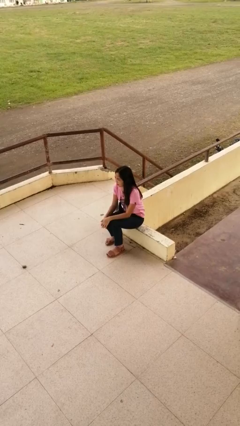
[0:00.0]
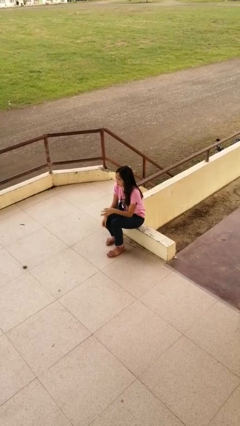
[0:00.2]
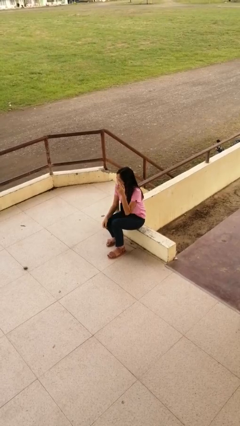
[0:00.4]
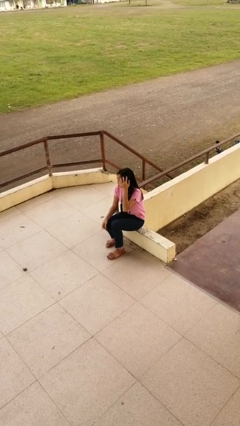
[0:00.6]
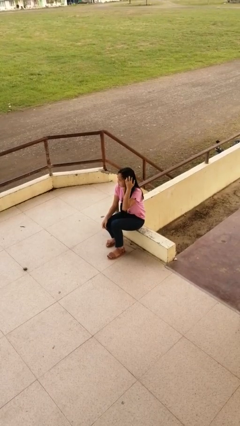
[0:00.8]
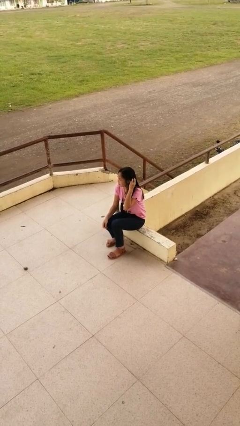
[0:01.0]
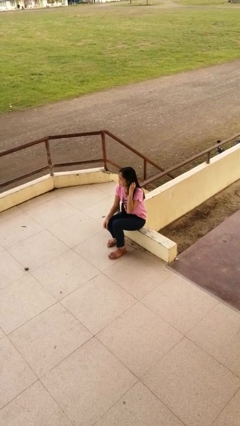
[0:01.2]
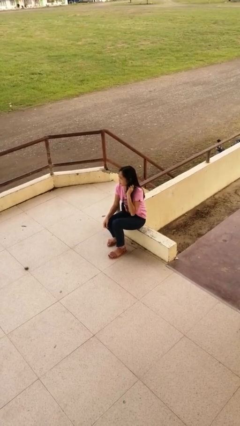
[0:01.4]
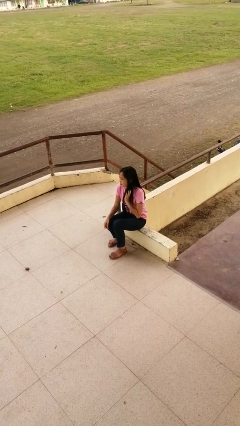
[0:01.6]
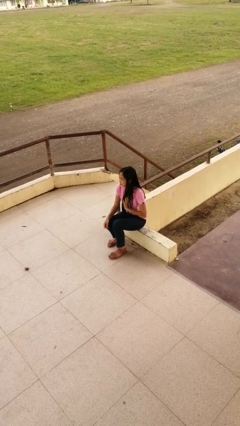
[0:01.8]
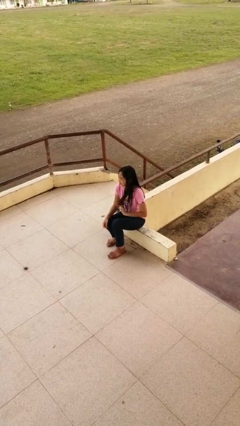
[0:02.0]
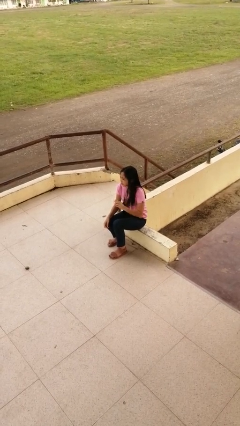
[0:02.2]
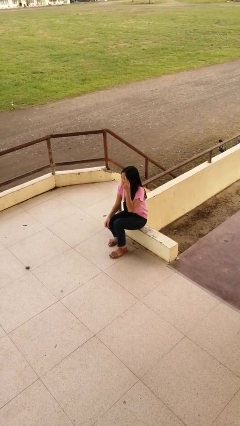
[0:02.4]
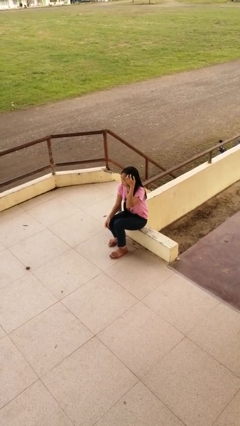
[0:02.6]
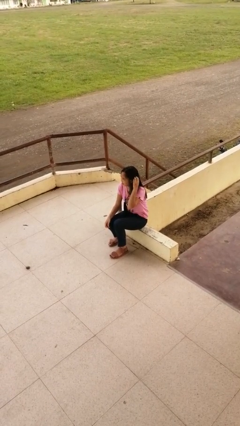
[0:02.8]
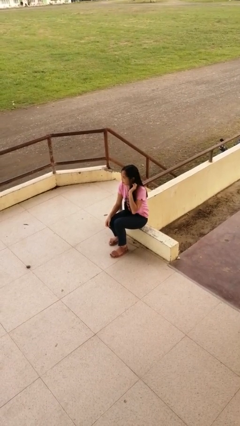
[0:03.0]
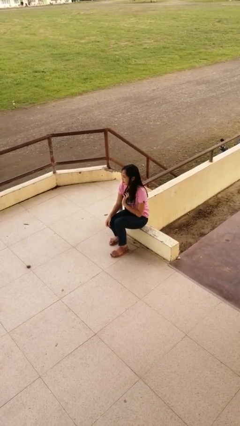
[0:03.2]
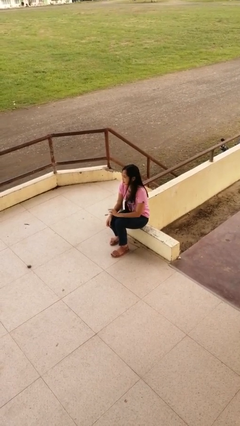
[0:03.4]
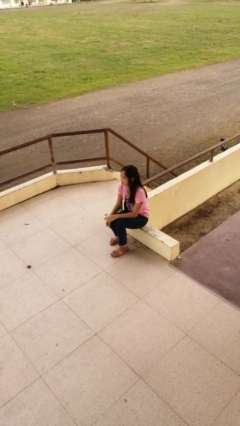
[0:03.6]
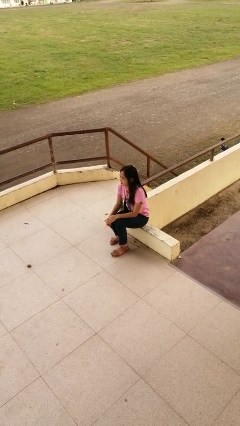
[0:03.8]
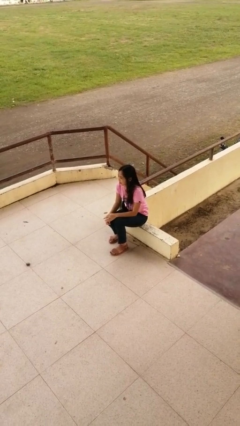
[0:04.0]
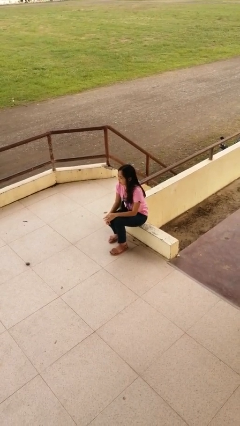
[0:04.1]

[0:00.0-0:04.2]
person strokes hair

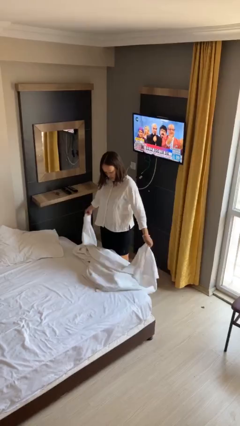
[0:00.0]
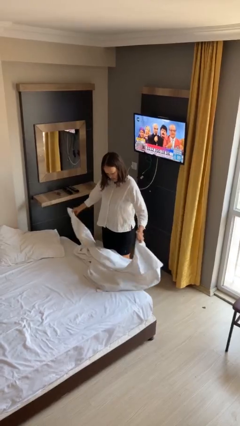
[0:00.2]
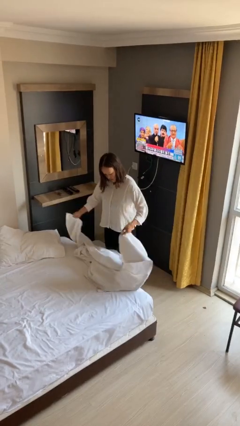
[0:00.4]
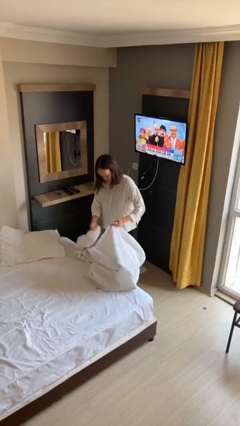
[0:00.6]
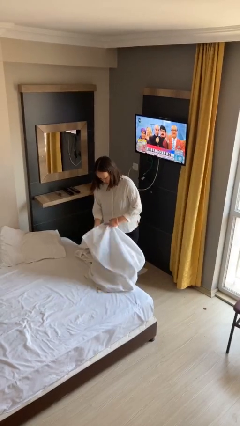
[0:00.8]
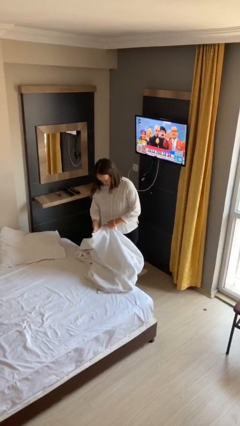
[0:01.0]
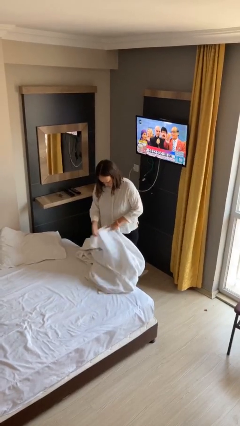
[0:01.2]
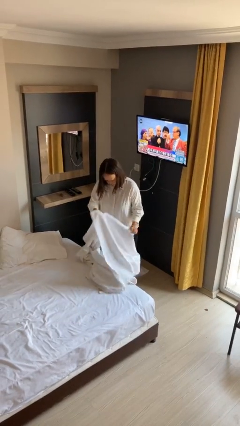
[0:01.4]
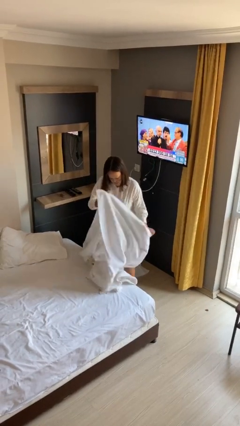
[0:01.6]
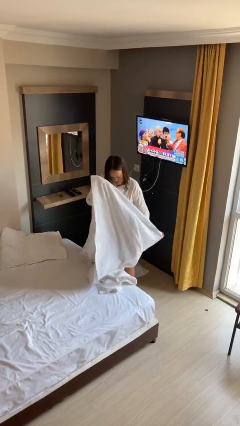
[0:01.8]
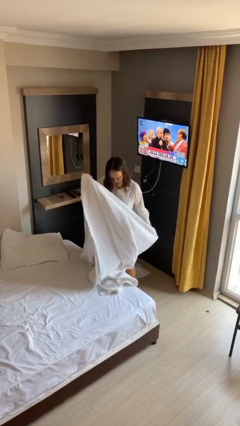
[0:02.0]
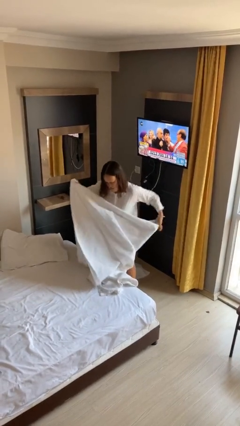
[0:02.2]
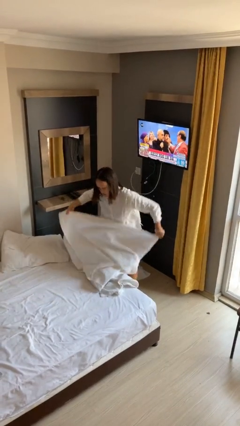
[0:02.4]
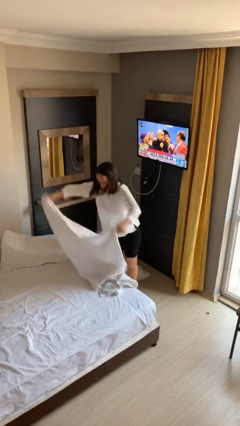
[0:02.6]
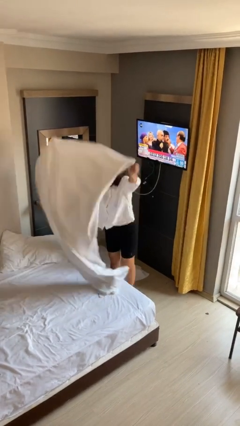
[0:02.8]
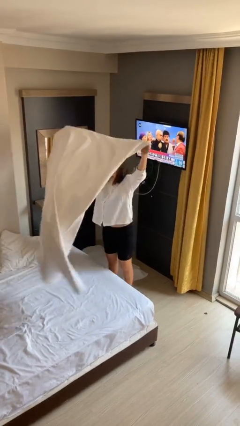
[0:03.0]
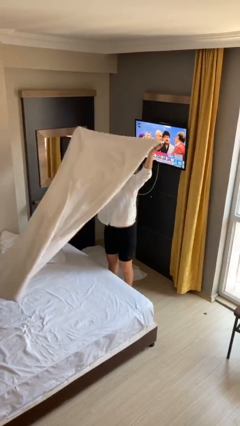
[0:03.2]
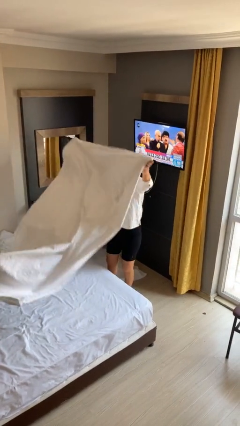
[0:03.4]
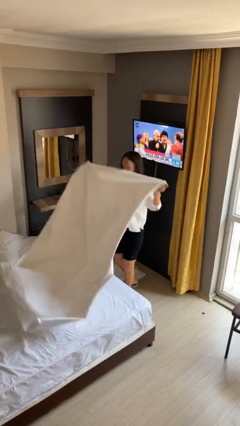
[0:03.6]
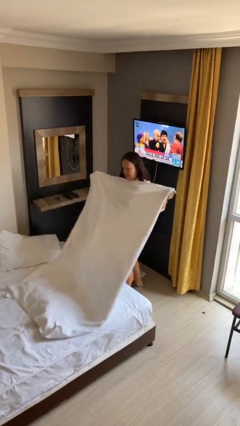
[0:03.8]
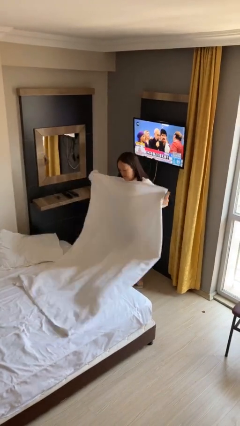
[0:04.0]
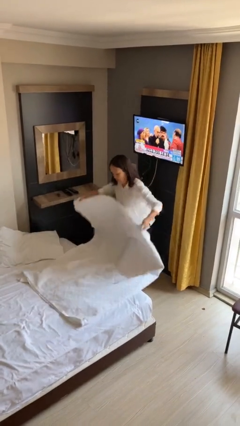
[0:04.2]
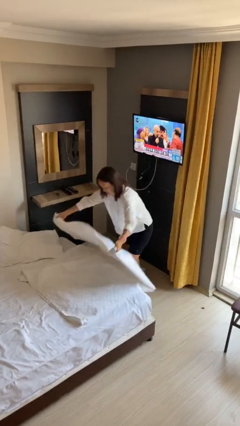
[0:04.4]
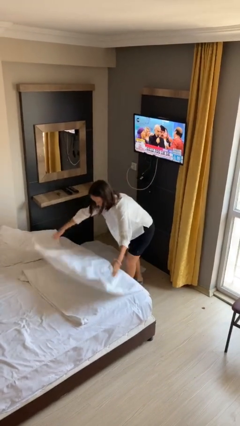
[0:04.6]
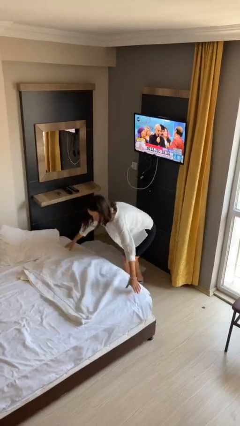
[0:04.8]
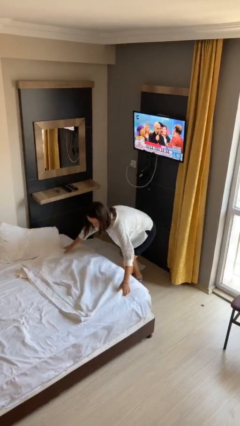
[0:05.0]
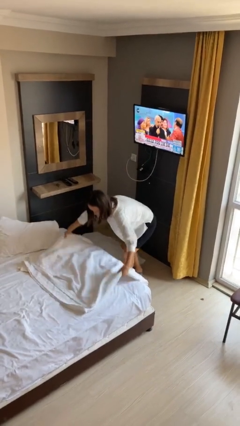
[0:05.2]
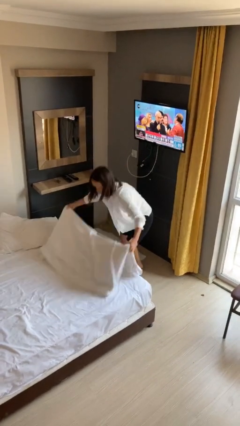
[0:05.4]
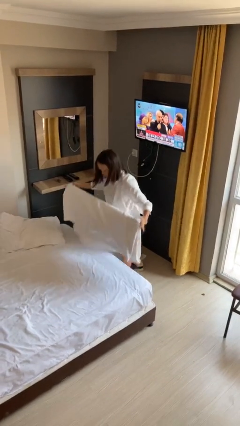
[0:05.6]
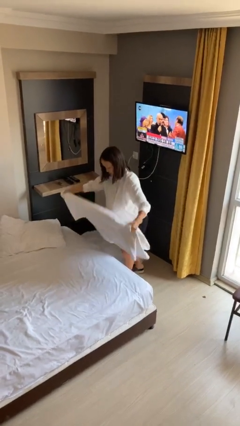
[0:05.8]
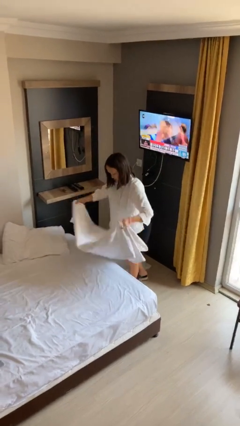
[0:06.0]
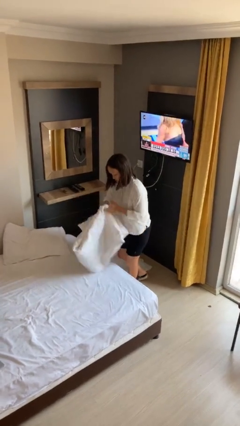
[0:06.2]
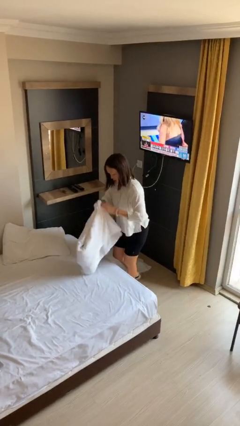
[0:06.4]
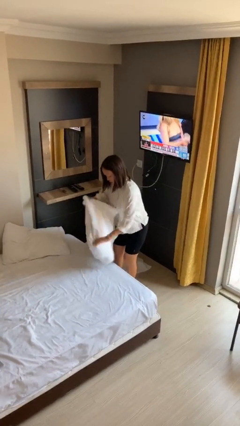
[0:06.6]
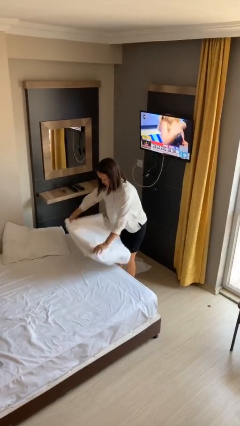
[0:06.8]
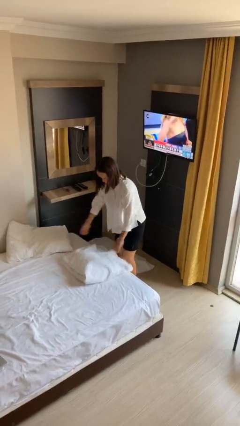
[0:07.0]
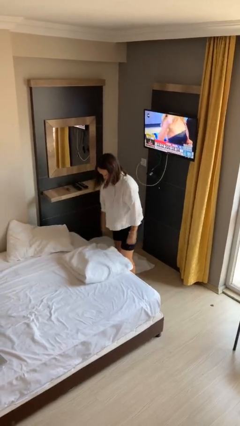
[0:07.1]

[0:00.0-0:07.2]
person folds blanket

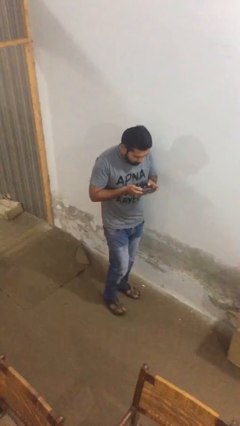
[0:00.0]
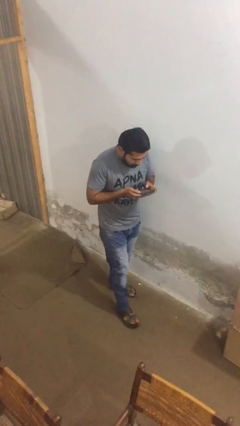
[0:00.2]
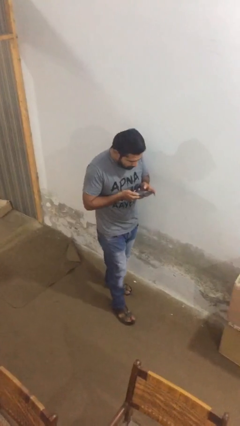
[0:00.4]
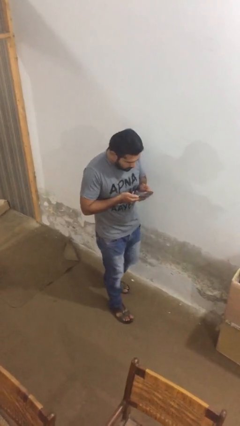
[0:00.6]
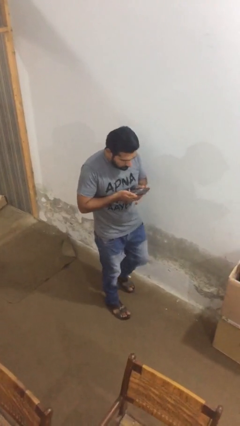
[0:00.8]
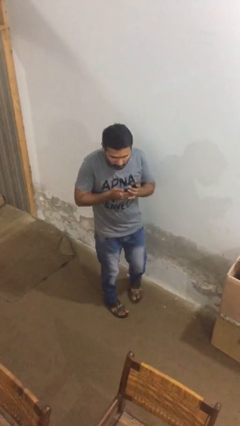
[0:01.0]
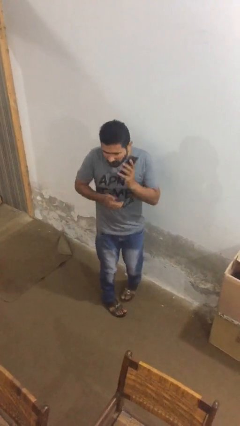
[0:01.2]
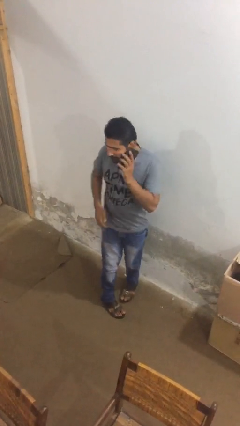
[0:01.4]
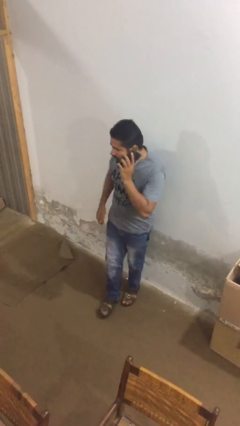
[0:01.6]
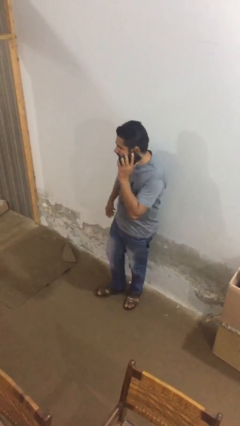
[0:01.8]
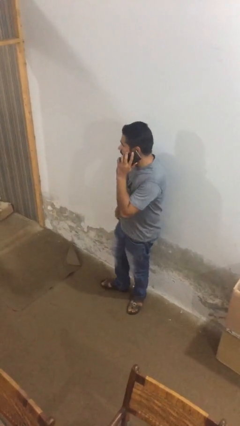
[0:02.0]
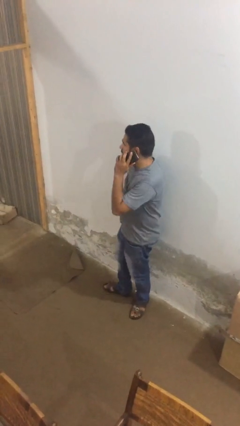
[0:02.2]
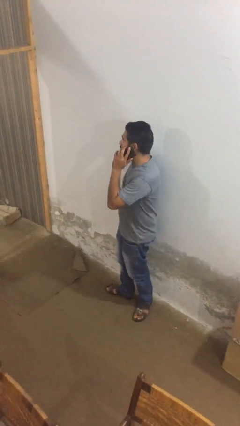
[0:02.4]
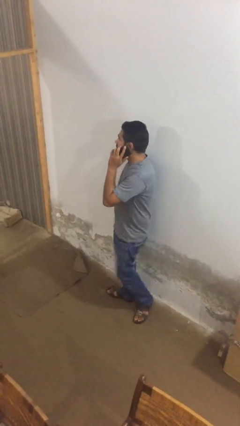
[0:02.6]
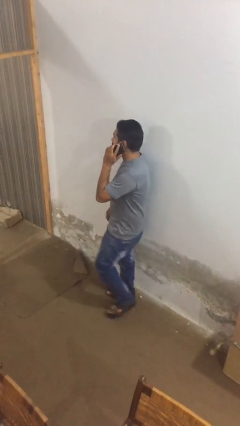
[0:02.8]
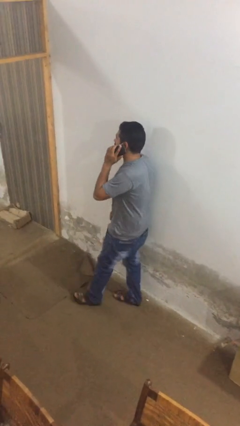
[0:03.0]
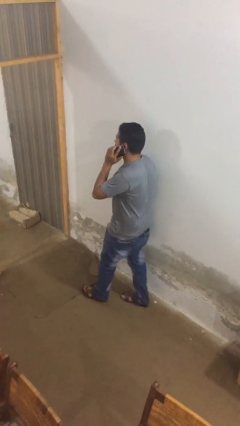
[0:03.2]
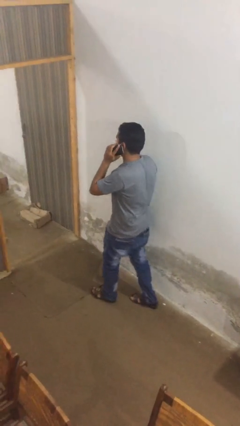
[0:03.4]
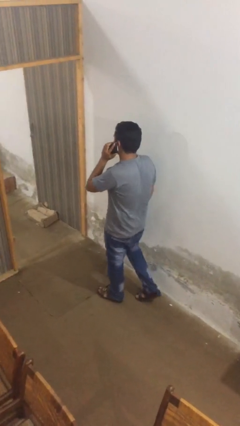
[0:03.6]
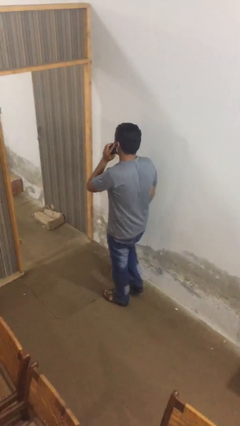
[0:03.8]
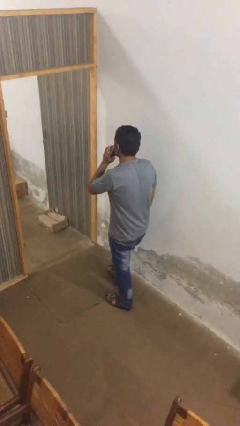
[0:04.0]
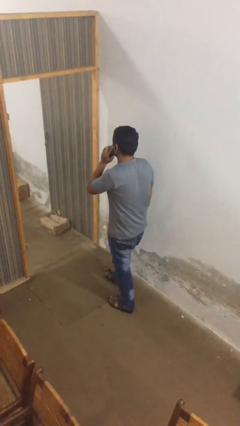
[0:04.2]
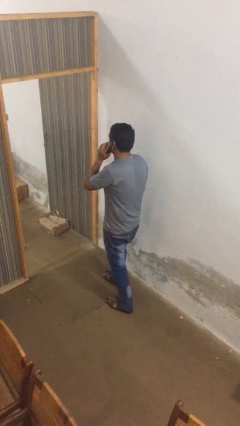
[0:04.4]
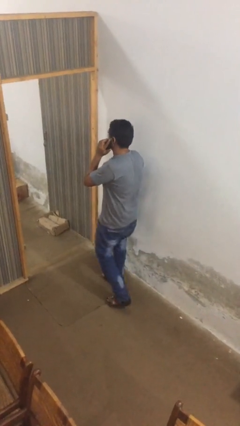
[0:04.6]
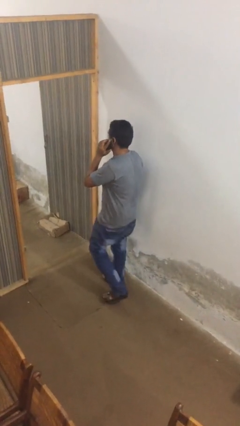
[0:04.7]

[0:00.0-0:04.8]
person talks on phone

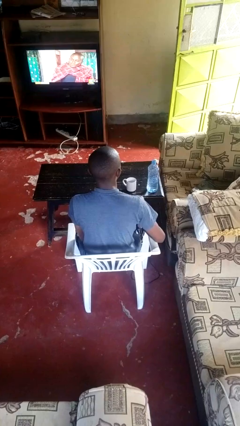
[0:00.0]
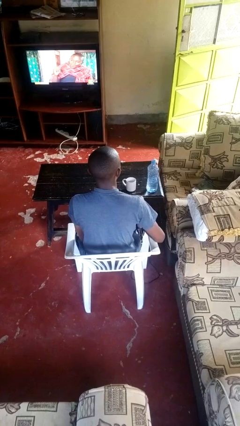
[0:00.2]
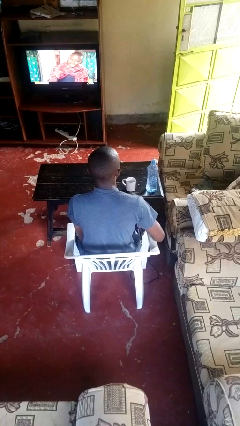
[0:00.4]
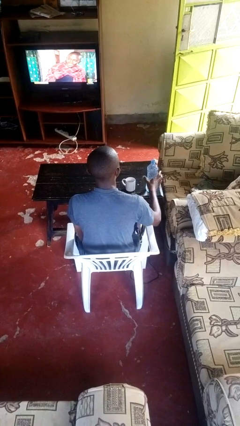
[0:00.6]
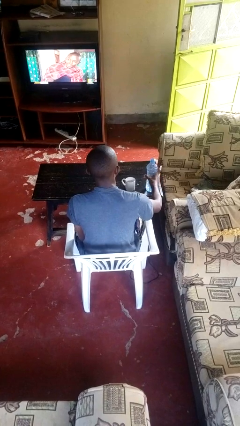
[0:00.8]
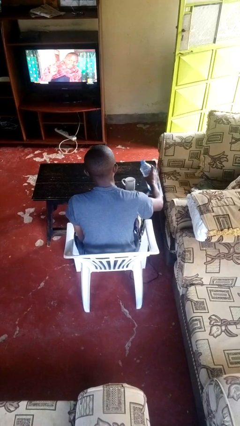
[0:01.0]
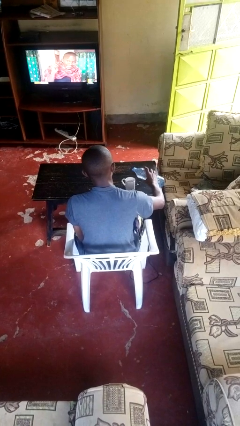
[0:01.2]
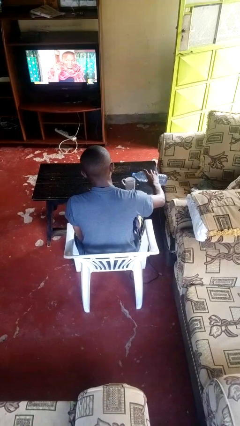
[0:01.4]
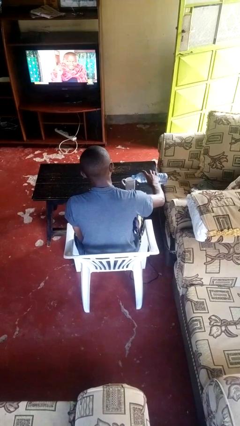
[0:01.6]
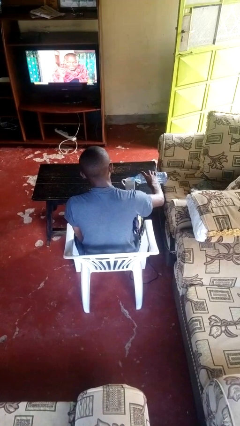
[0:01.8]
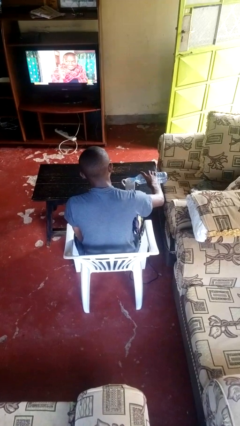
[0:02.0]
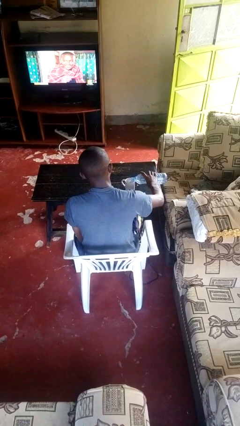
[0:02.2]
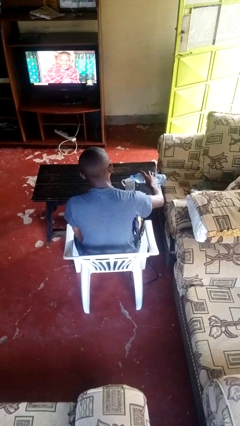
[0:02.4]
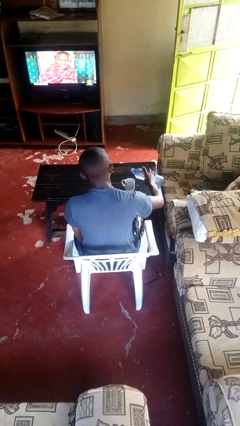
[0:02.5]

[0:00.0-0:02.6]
person pours liquid into cup
